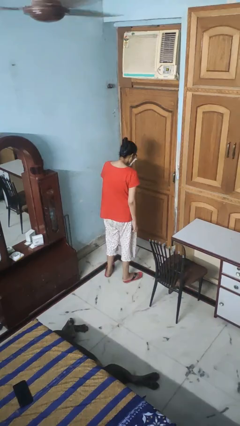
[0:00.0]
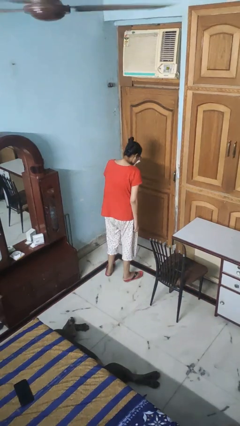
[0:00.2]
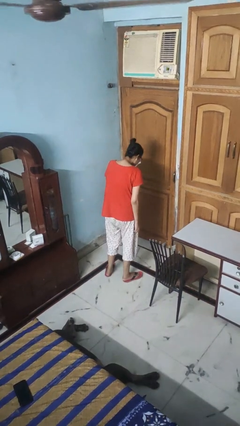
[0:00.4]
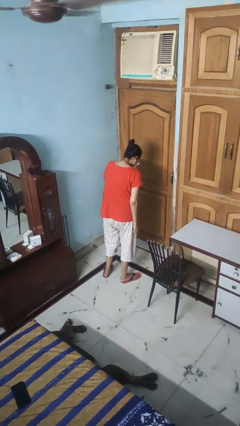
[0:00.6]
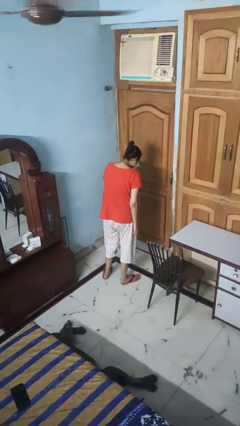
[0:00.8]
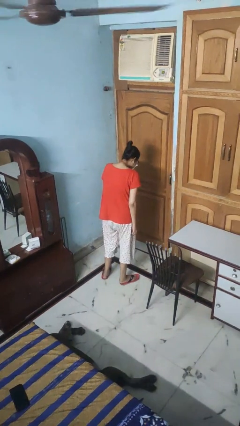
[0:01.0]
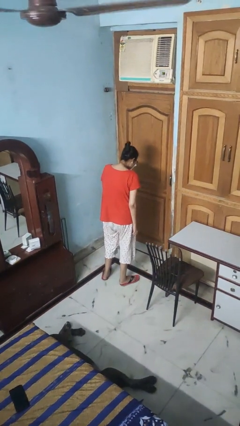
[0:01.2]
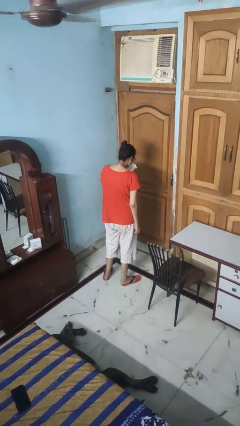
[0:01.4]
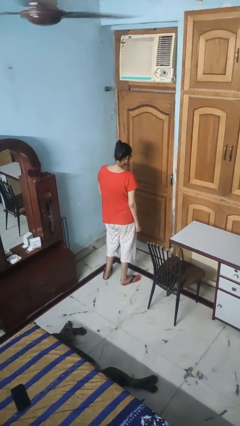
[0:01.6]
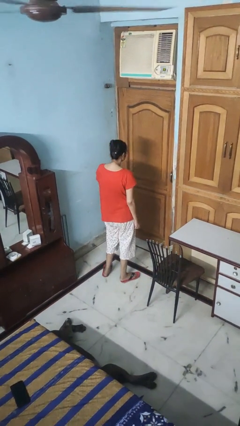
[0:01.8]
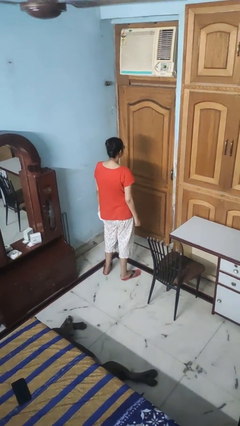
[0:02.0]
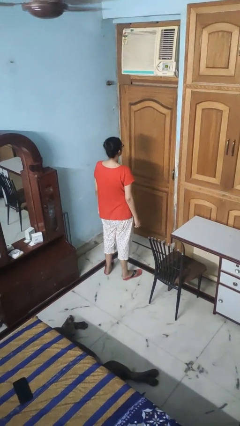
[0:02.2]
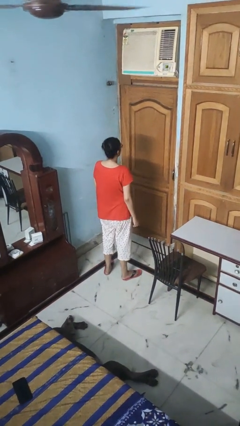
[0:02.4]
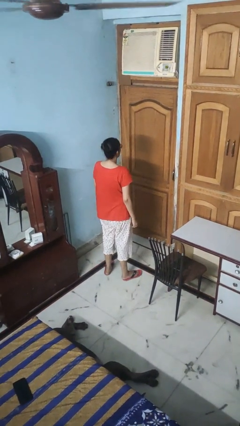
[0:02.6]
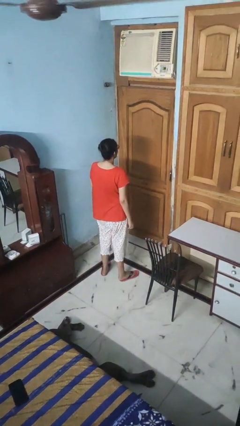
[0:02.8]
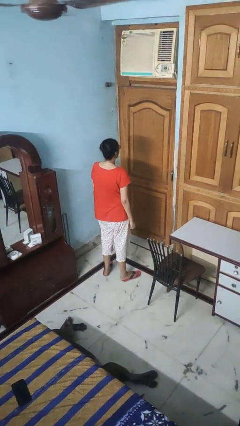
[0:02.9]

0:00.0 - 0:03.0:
person blows nose

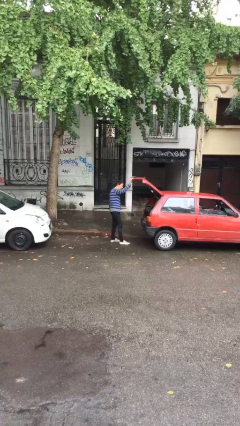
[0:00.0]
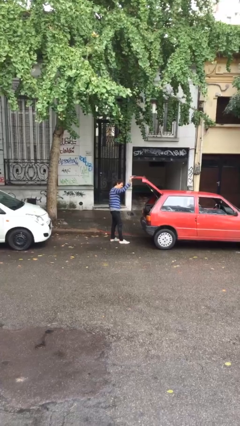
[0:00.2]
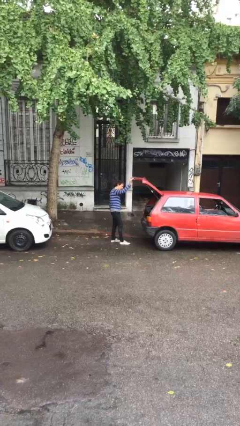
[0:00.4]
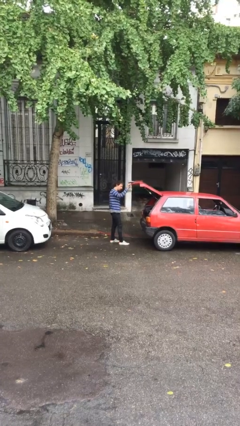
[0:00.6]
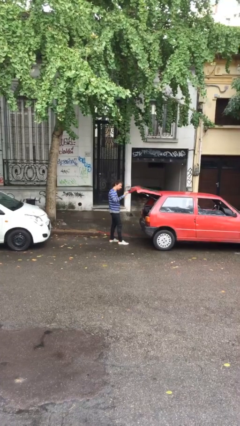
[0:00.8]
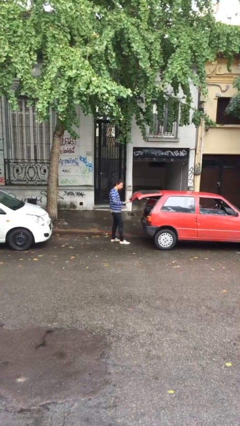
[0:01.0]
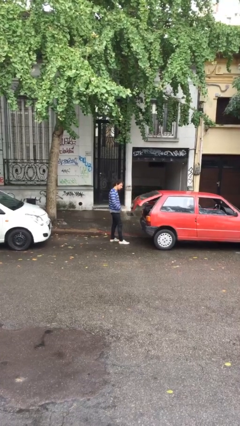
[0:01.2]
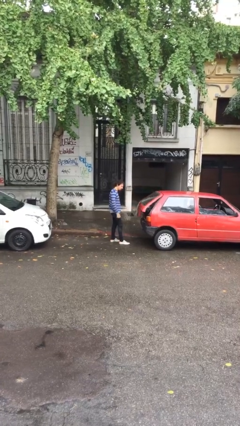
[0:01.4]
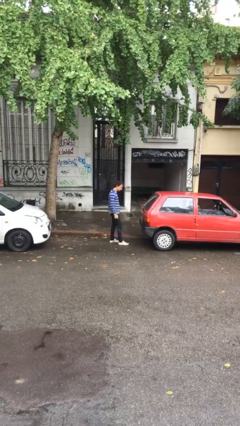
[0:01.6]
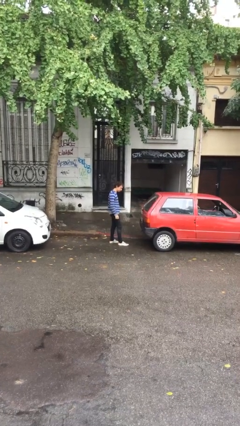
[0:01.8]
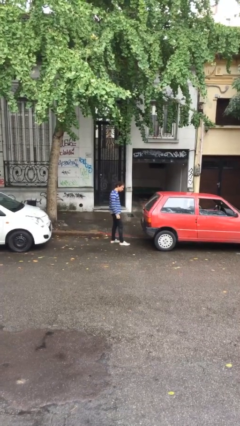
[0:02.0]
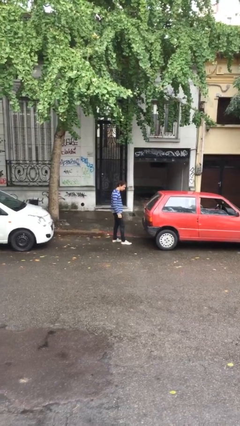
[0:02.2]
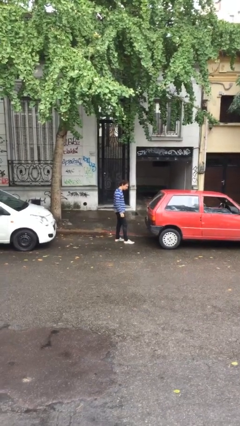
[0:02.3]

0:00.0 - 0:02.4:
person closes car trunk

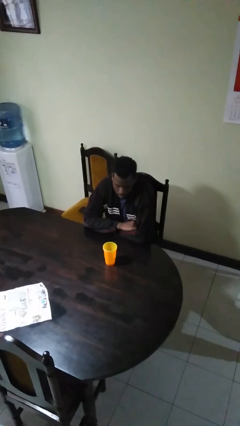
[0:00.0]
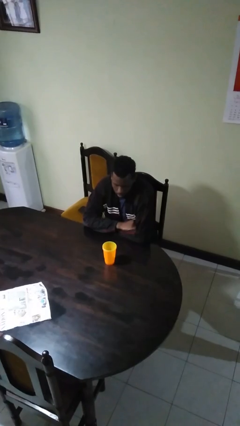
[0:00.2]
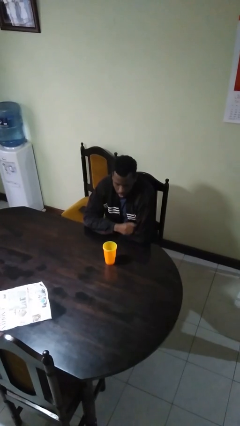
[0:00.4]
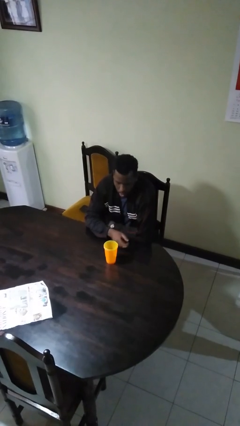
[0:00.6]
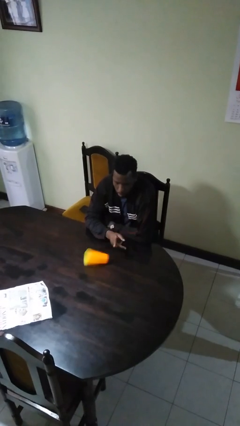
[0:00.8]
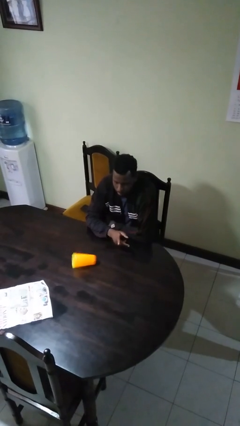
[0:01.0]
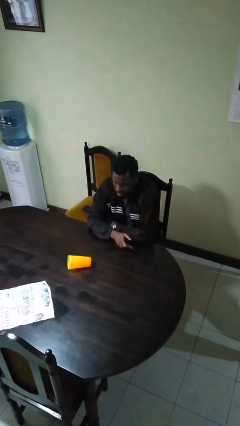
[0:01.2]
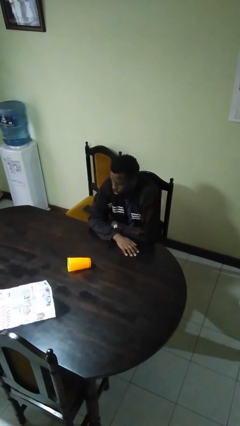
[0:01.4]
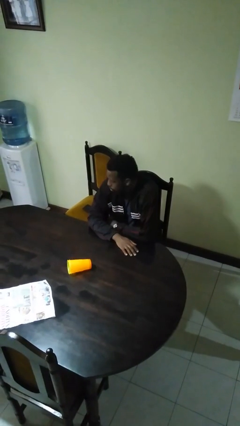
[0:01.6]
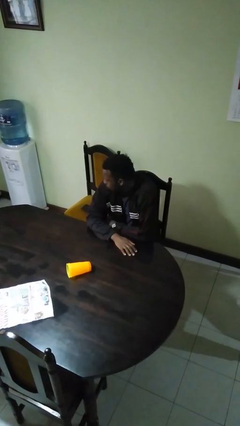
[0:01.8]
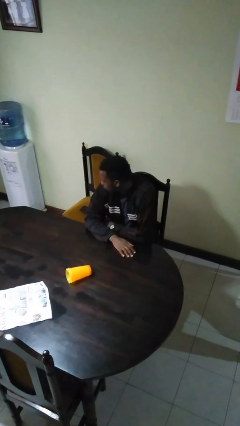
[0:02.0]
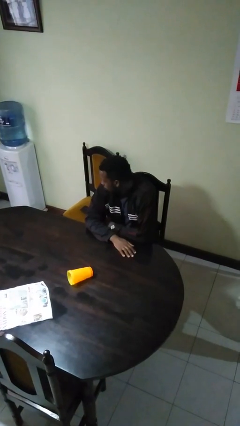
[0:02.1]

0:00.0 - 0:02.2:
person knocks over glass

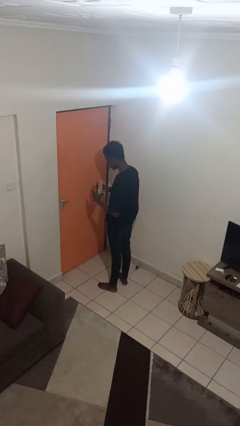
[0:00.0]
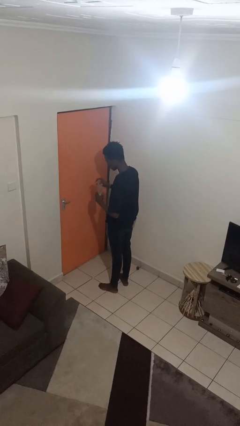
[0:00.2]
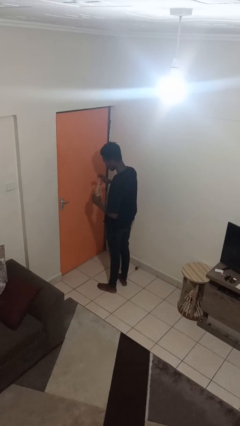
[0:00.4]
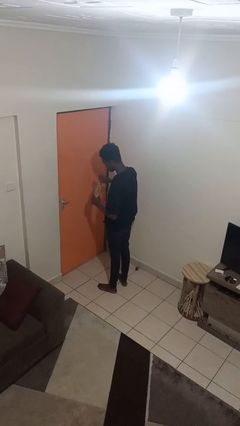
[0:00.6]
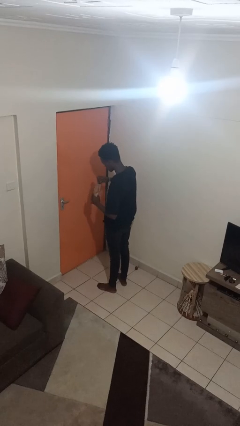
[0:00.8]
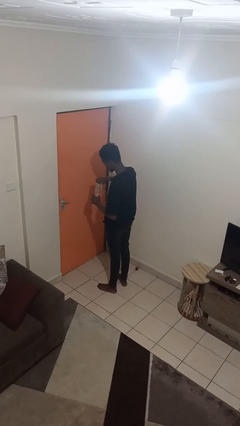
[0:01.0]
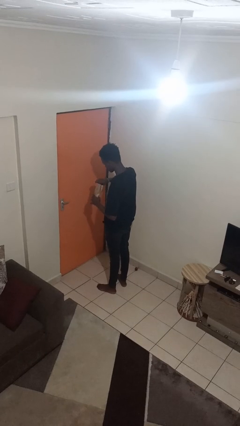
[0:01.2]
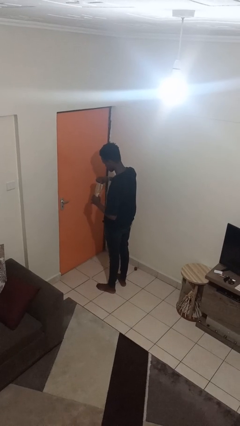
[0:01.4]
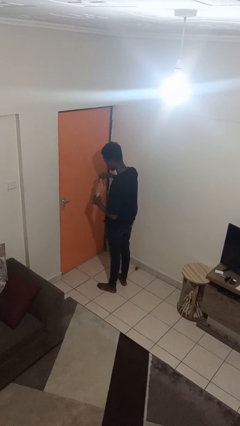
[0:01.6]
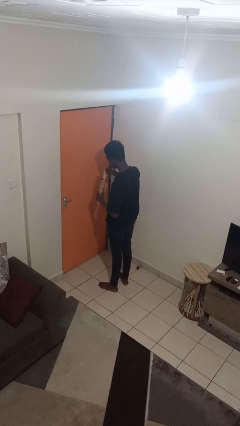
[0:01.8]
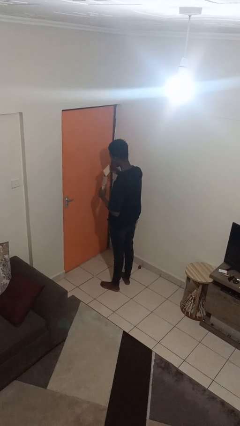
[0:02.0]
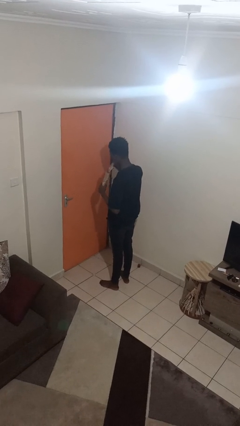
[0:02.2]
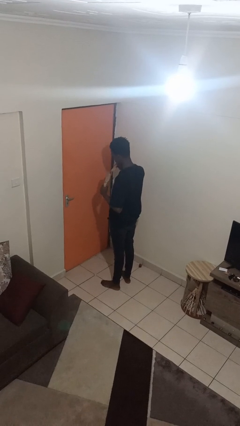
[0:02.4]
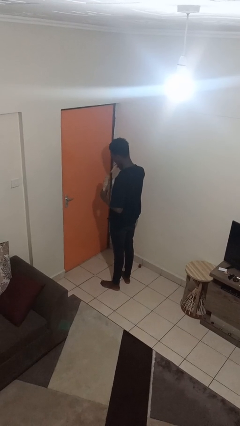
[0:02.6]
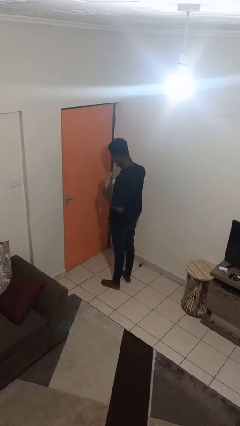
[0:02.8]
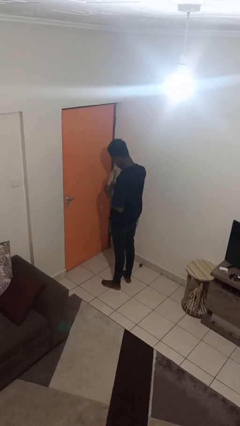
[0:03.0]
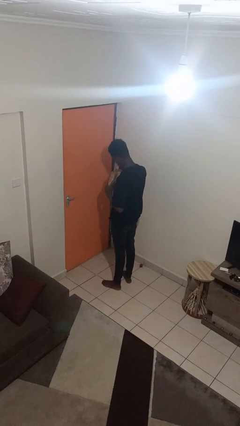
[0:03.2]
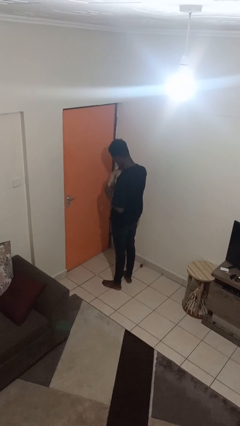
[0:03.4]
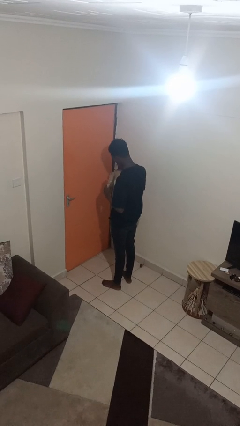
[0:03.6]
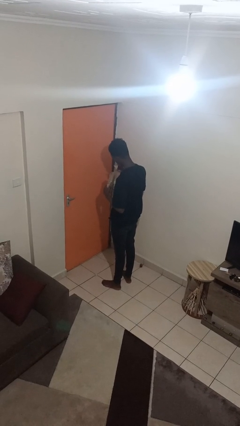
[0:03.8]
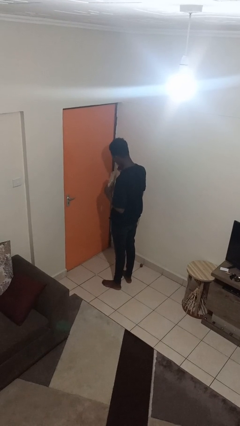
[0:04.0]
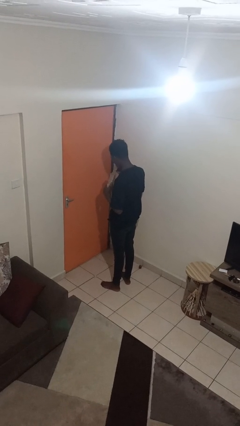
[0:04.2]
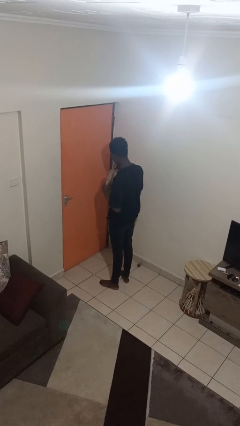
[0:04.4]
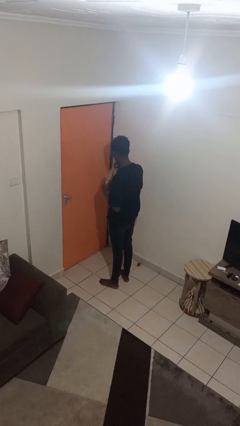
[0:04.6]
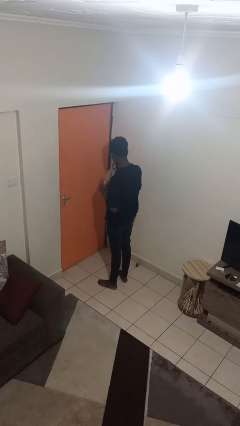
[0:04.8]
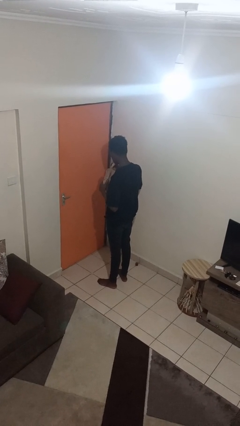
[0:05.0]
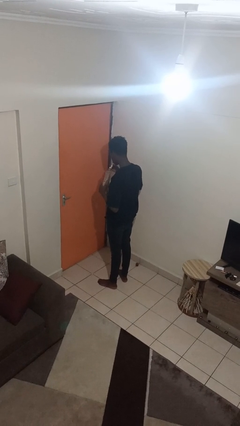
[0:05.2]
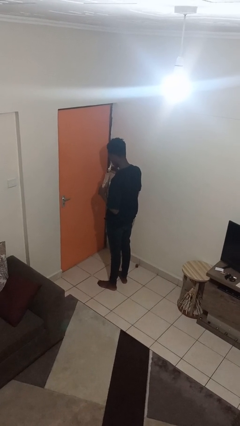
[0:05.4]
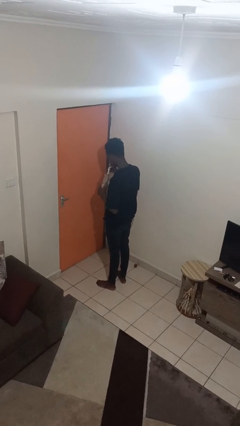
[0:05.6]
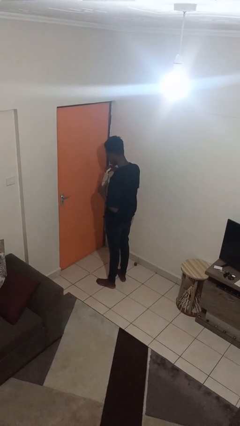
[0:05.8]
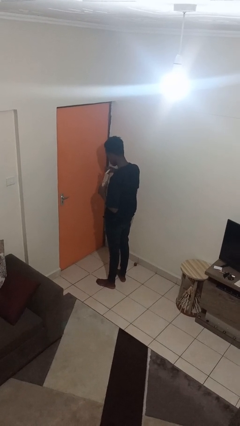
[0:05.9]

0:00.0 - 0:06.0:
person eats snack from bag

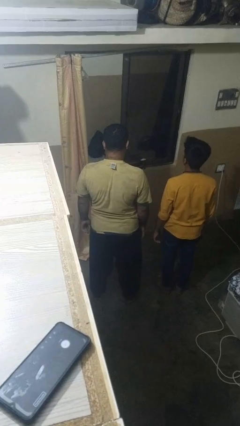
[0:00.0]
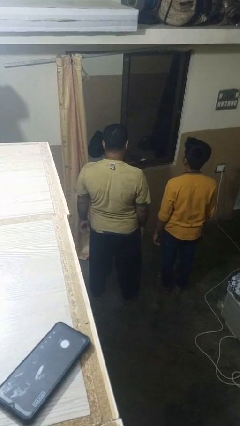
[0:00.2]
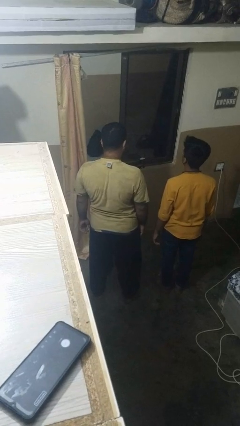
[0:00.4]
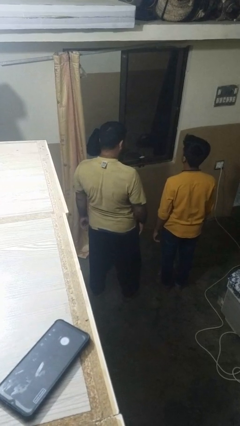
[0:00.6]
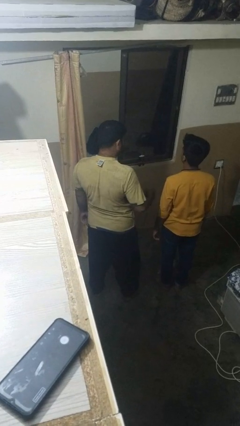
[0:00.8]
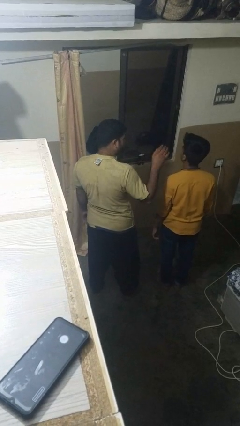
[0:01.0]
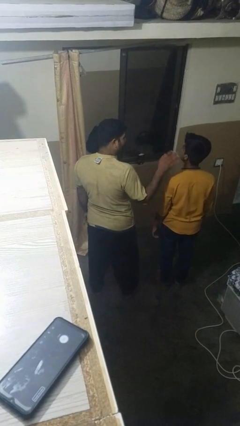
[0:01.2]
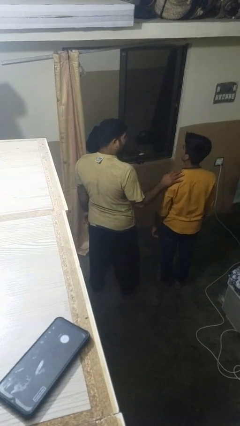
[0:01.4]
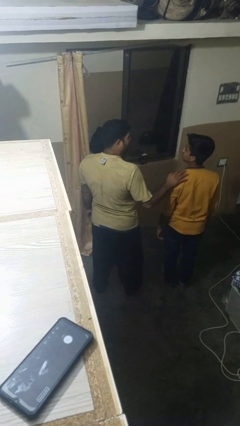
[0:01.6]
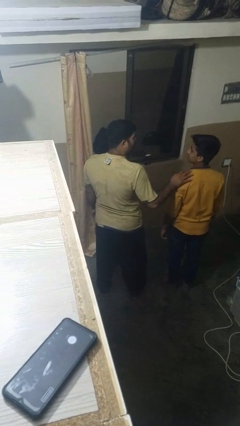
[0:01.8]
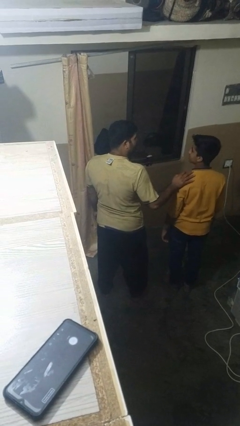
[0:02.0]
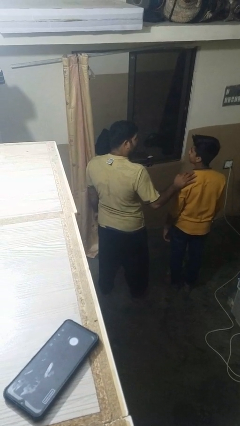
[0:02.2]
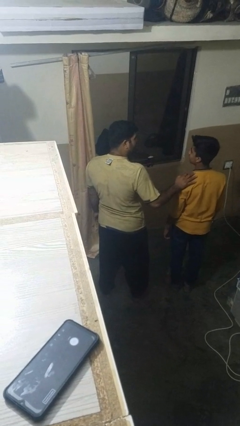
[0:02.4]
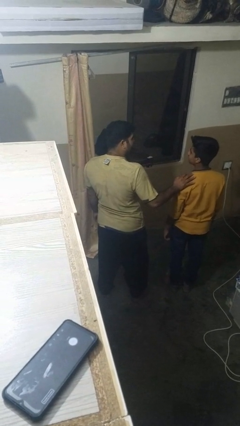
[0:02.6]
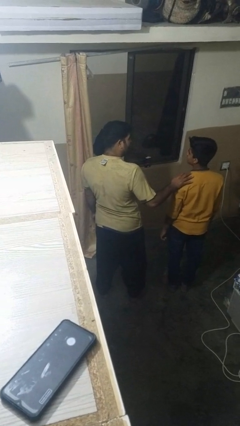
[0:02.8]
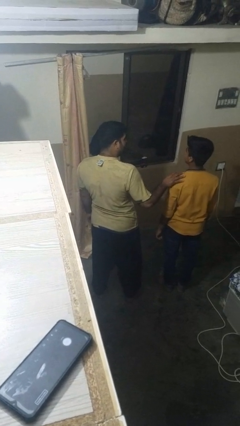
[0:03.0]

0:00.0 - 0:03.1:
person pounds shoulders of person

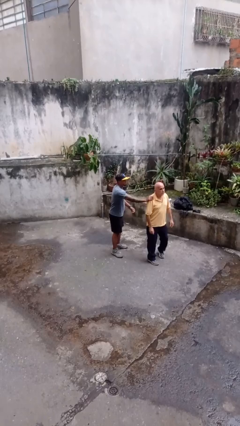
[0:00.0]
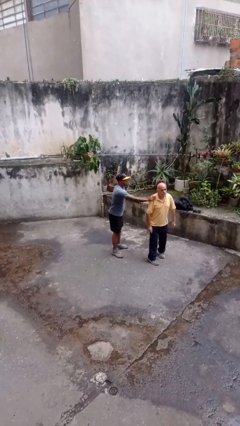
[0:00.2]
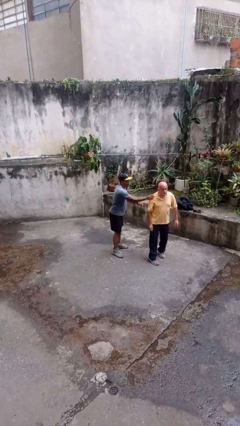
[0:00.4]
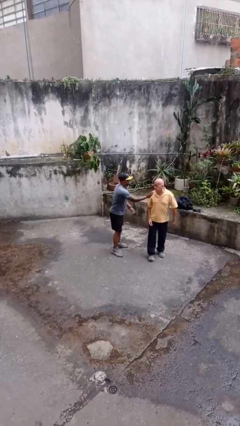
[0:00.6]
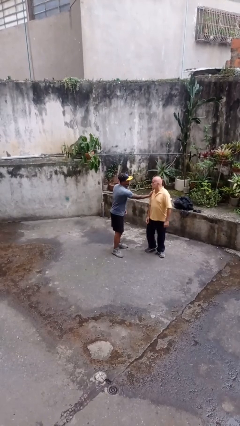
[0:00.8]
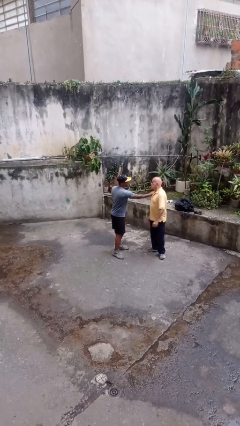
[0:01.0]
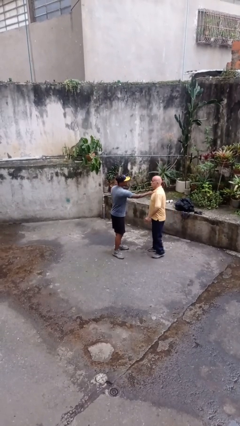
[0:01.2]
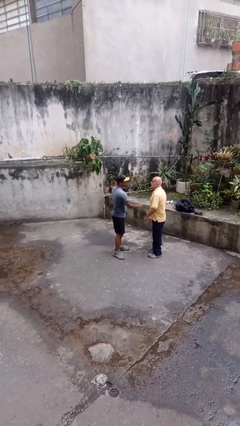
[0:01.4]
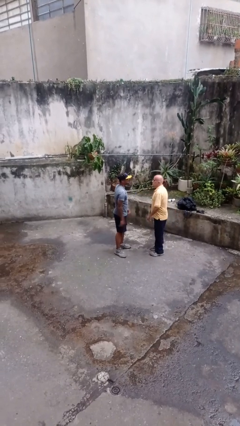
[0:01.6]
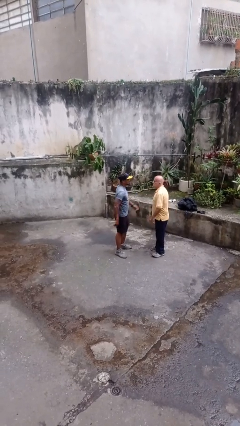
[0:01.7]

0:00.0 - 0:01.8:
person spins person around
